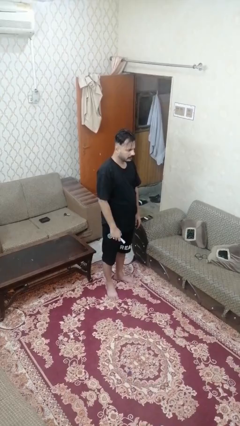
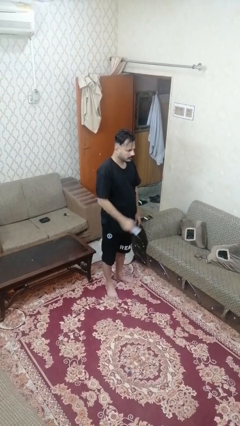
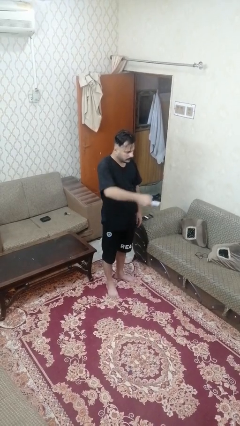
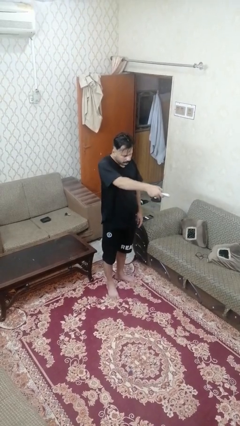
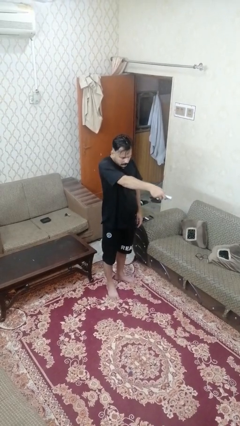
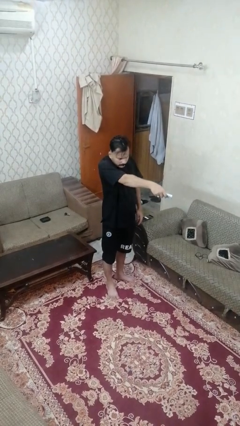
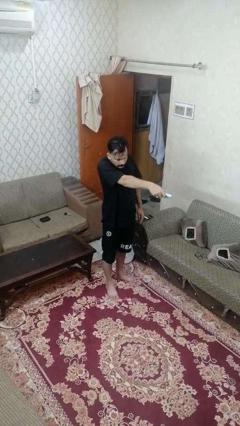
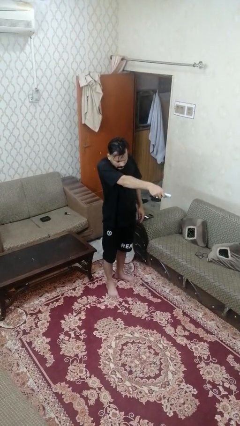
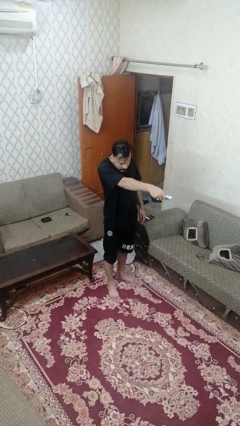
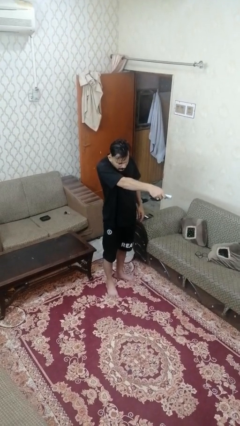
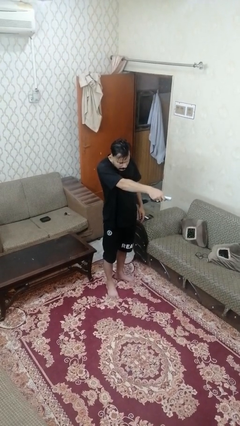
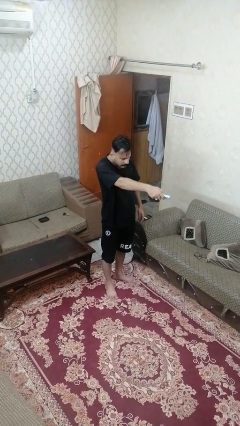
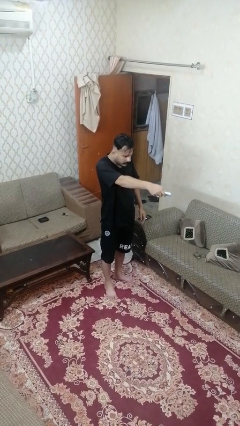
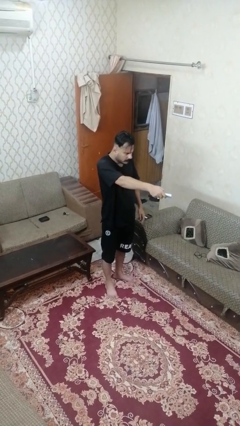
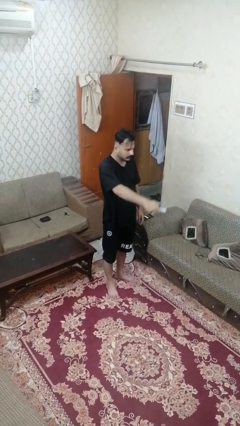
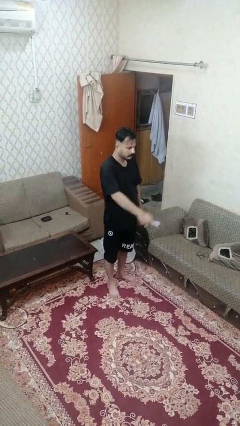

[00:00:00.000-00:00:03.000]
person uses television remote

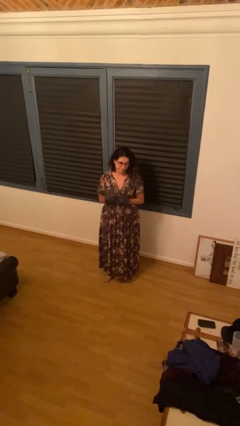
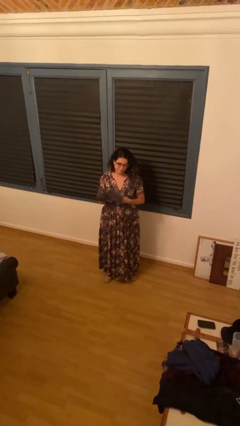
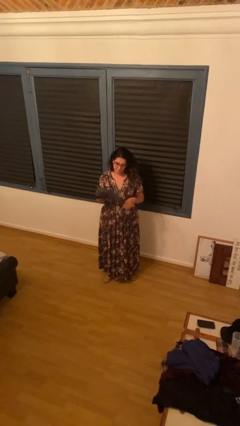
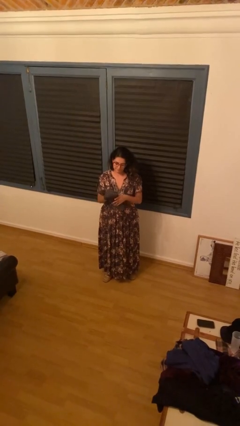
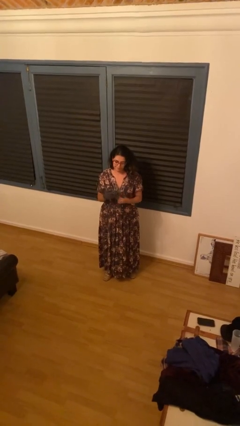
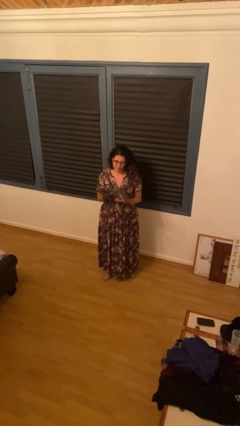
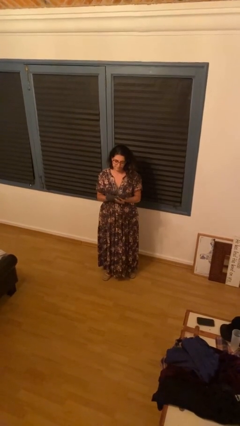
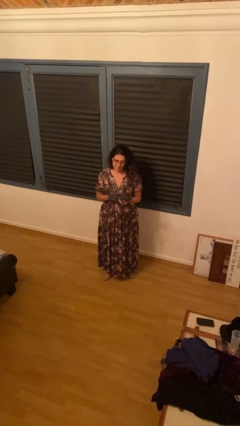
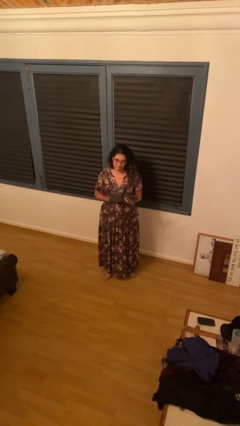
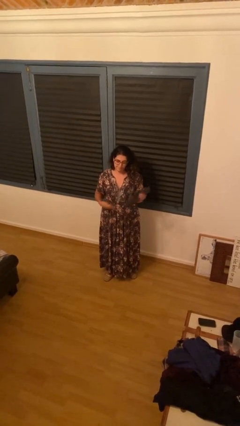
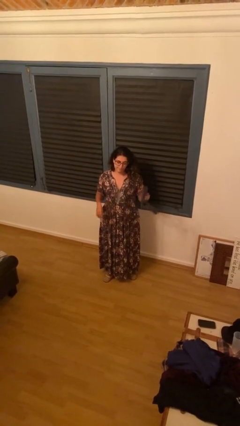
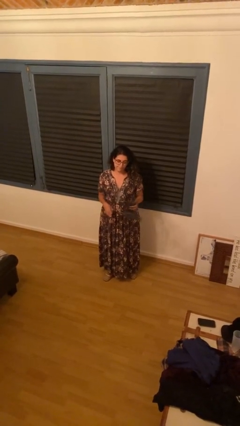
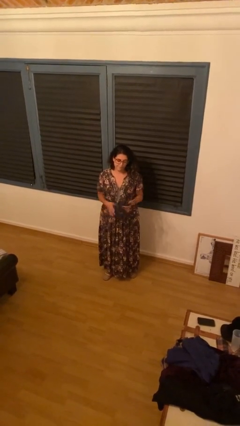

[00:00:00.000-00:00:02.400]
person takes off gloves

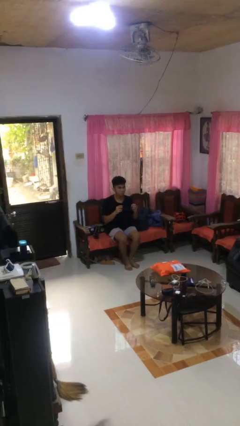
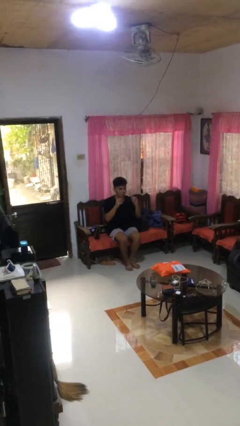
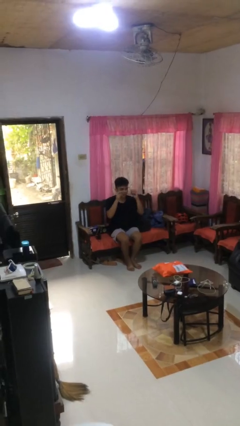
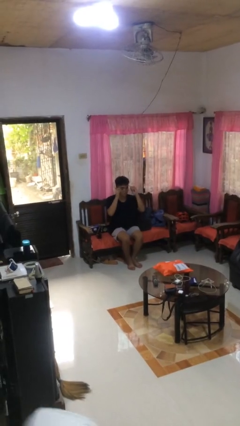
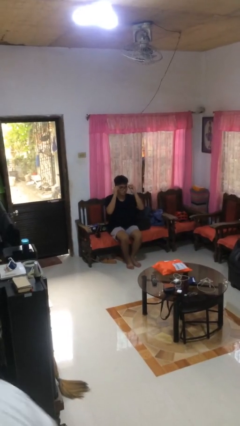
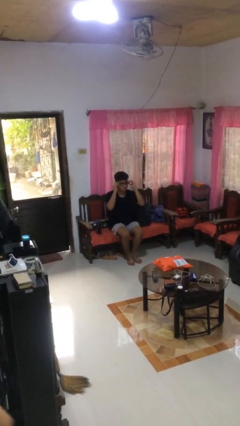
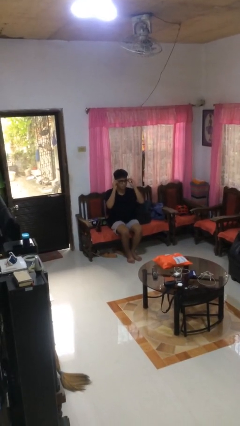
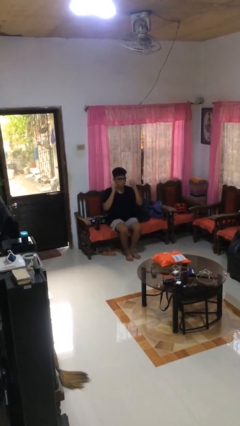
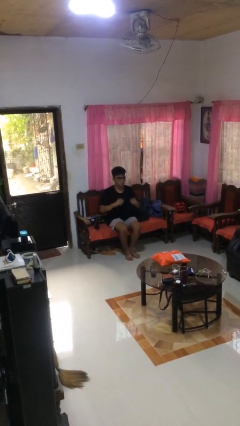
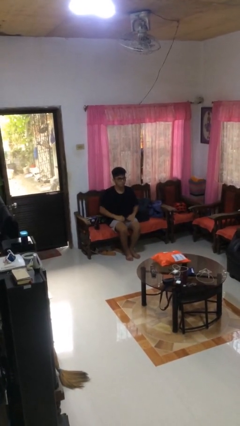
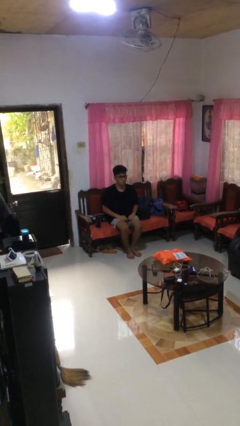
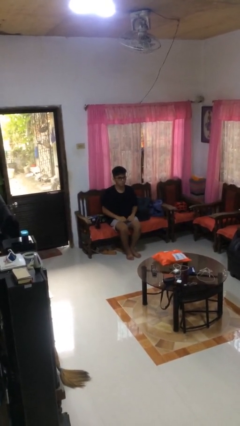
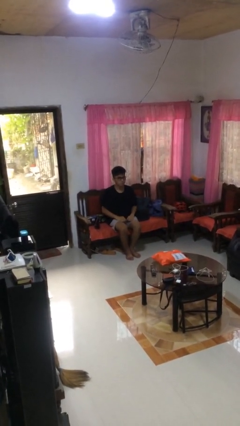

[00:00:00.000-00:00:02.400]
person puts on glasses

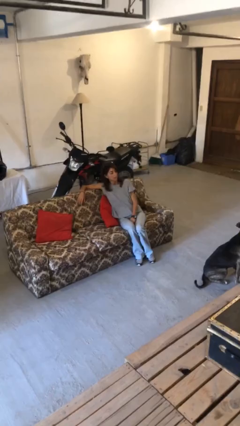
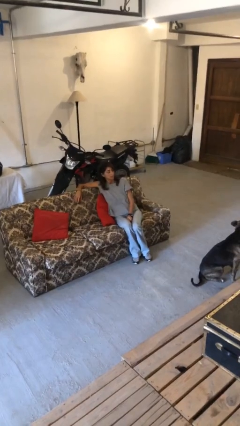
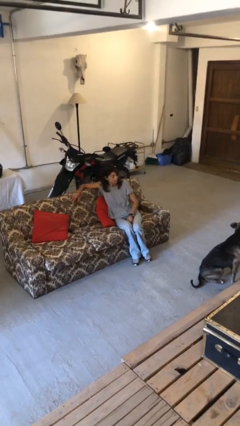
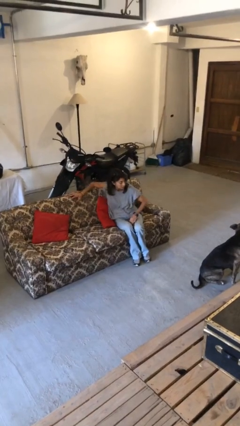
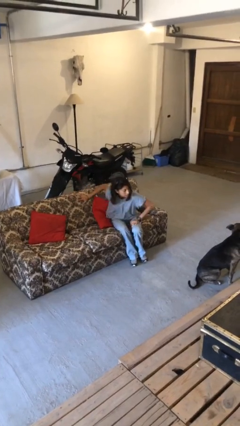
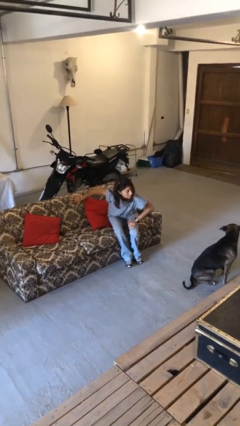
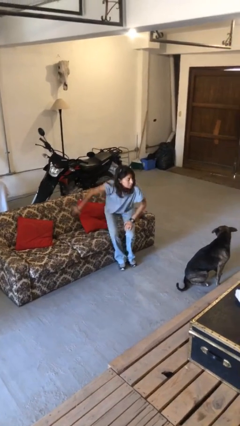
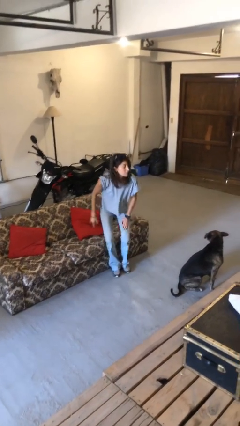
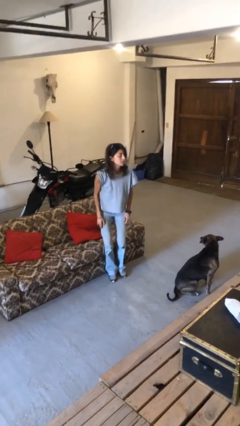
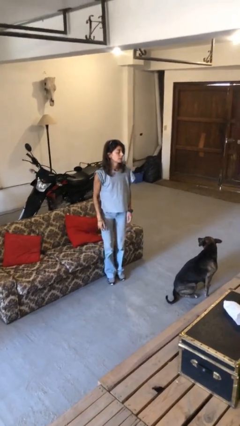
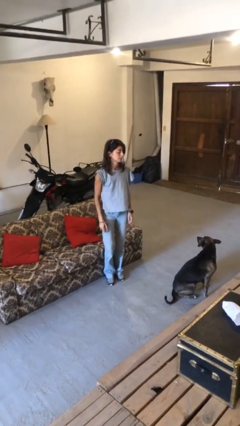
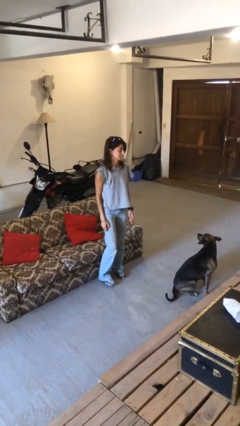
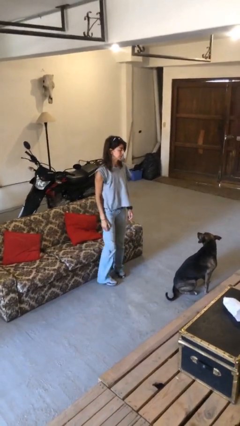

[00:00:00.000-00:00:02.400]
person stands up

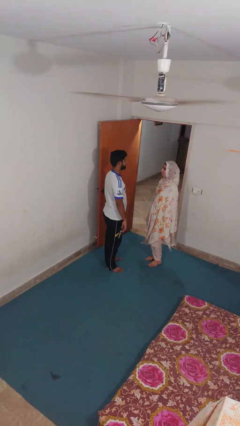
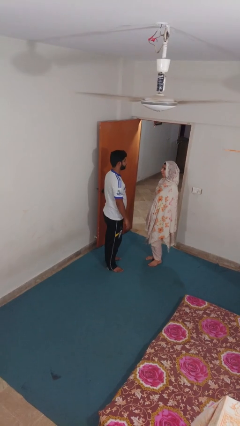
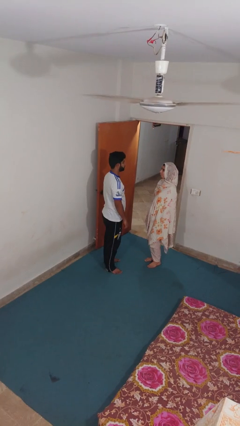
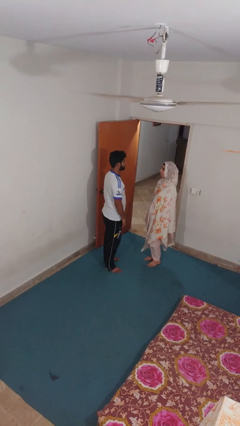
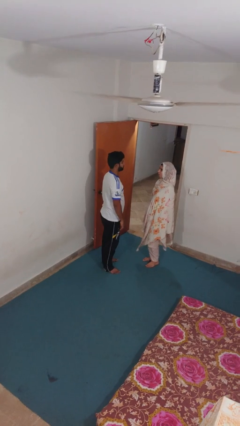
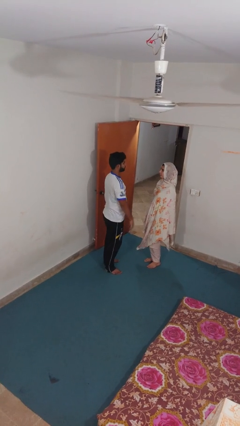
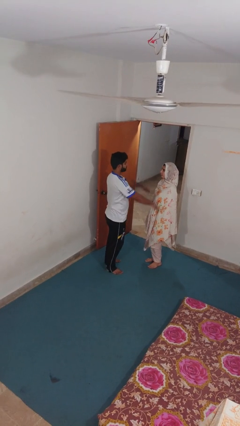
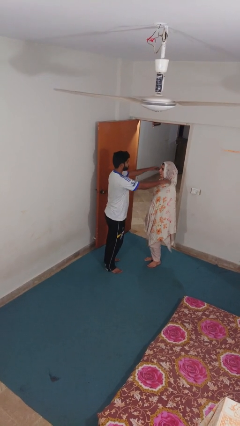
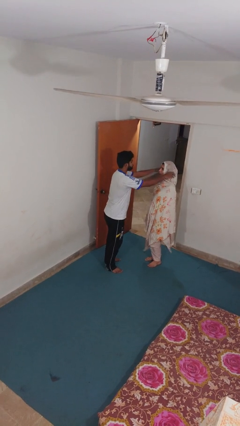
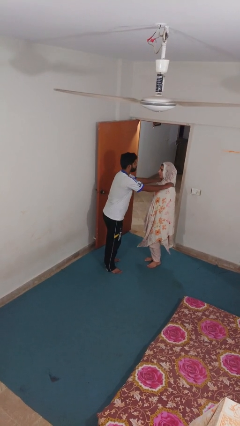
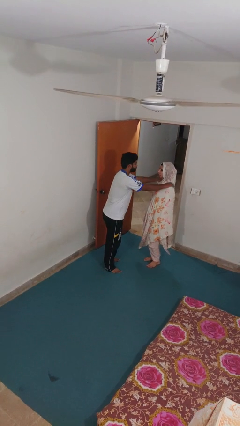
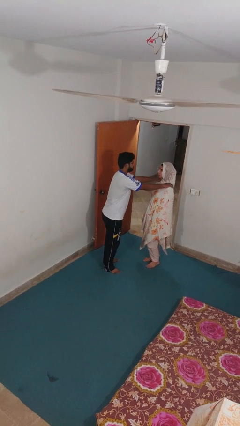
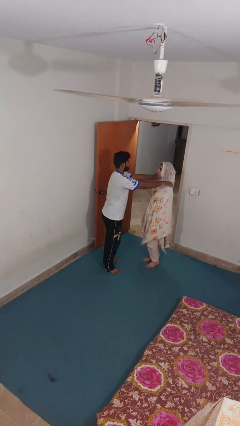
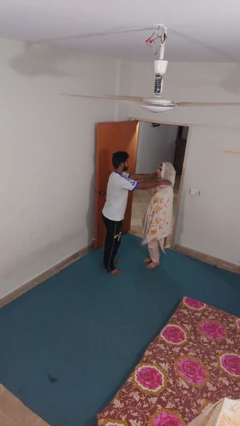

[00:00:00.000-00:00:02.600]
person pounds shoulders of person

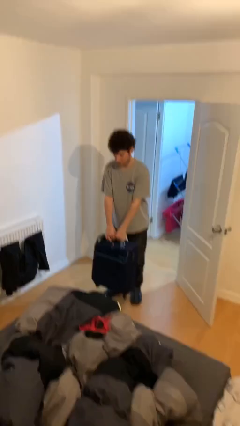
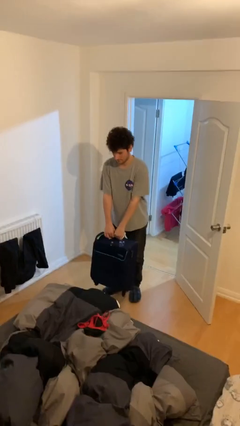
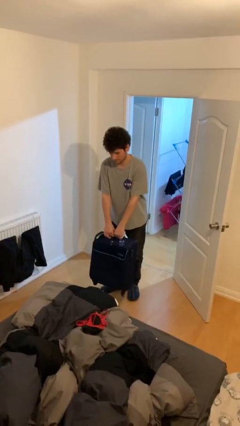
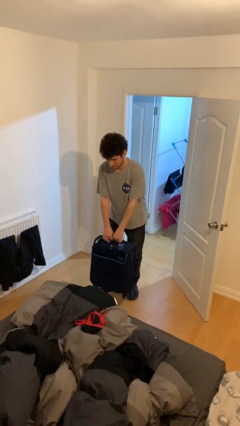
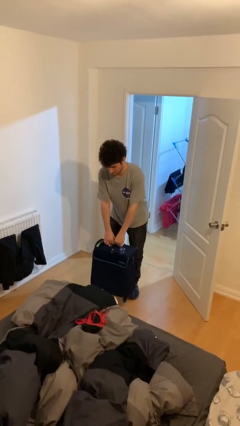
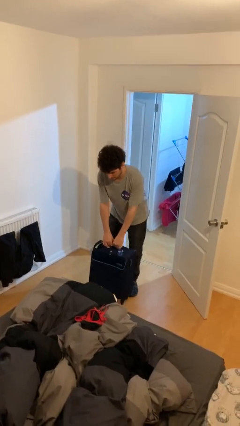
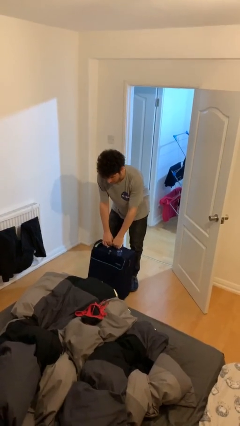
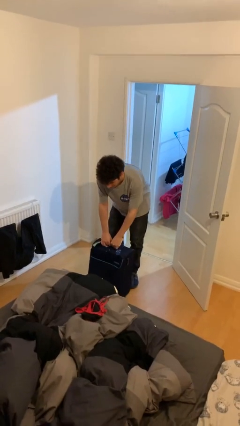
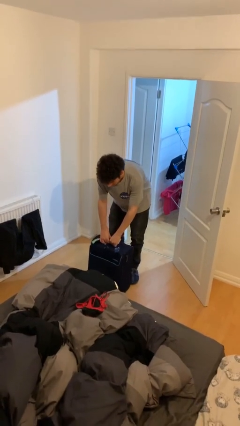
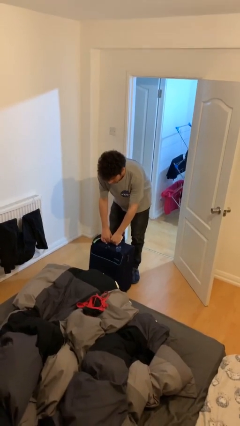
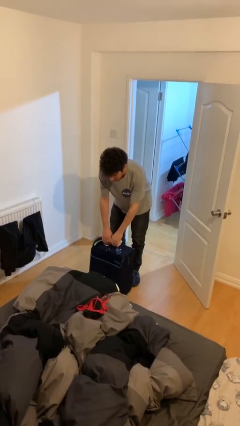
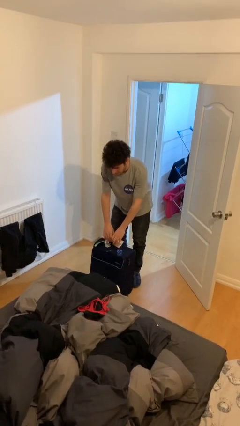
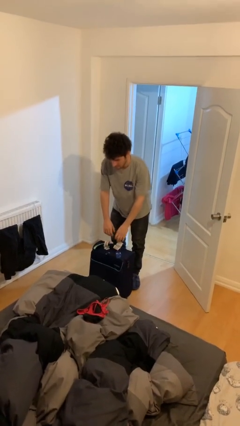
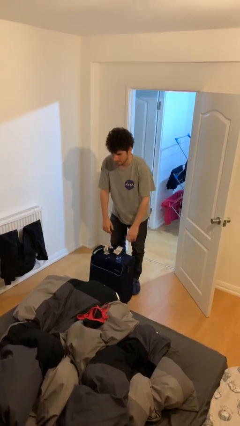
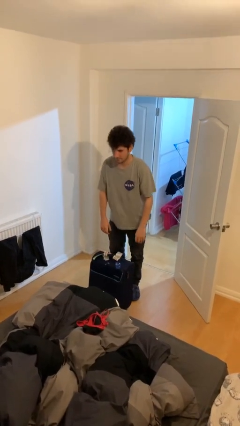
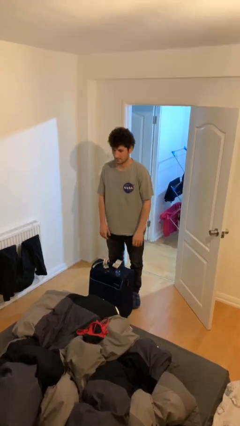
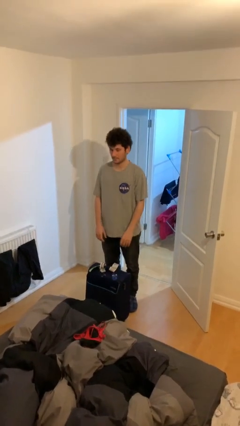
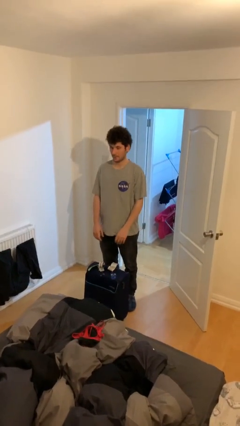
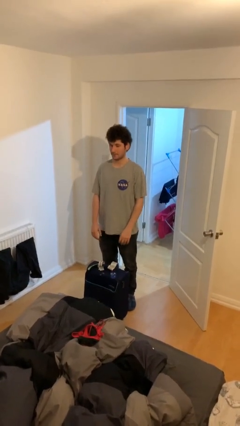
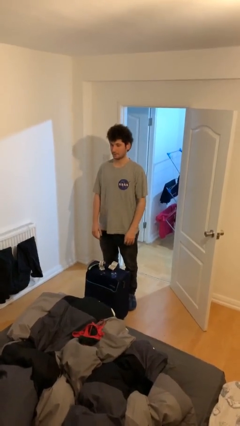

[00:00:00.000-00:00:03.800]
person puts down object on floor

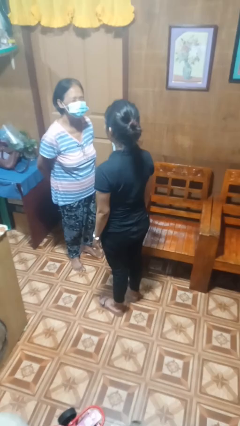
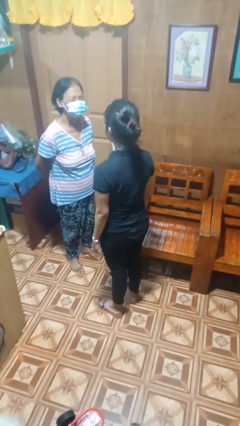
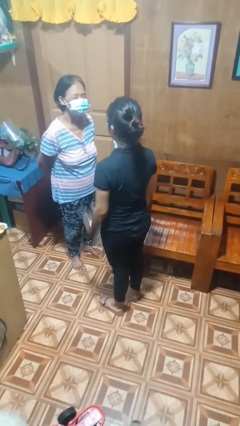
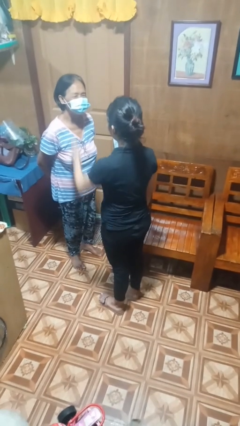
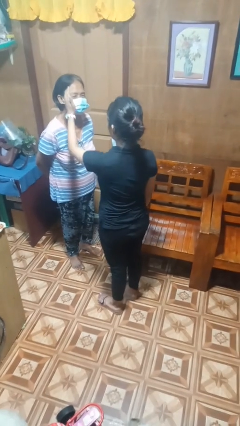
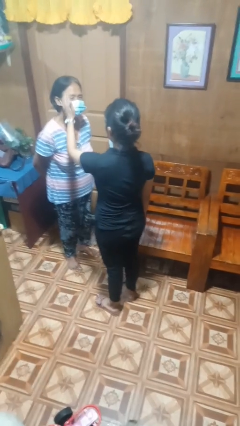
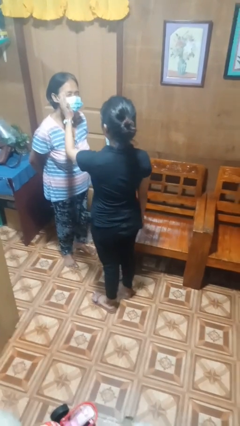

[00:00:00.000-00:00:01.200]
person touches face of person
